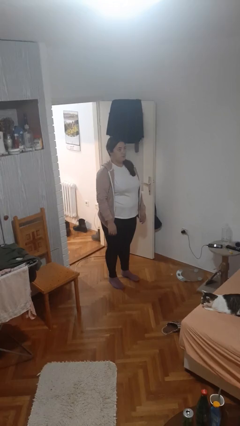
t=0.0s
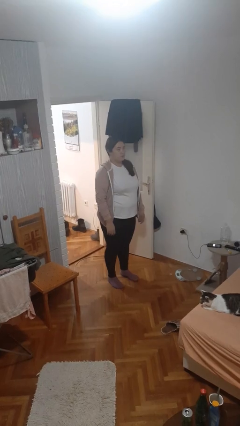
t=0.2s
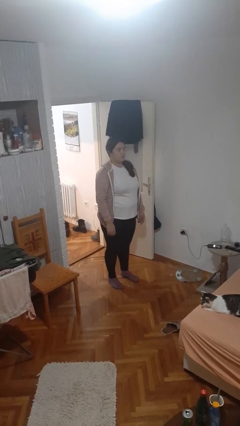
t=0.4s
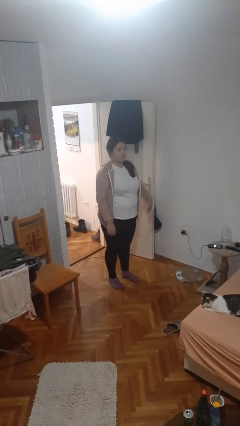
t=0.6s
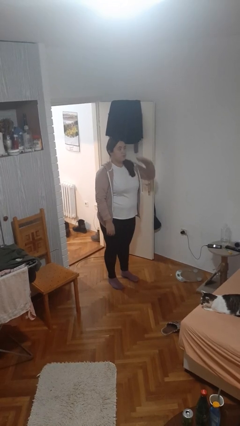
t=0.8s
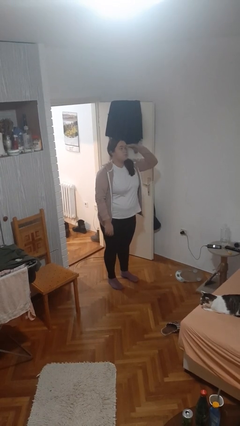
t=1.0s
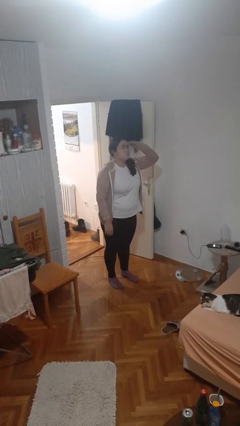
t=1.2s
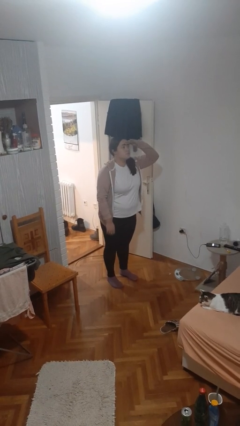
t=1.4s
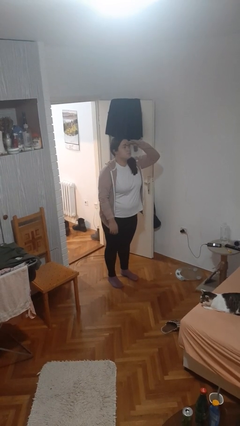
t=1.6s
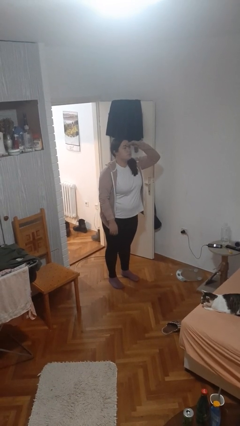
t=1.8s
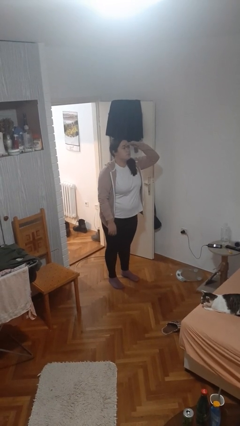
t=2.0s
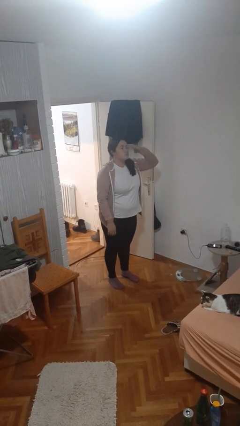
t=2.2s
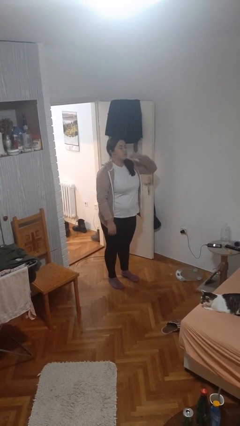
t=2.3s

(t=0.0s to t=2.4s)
person shades eyes

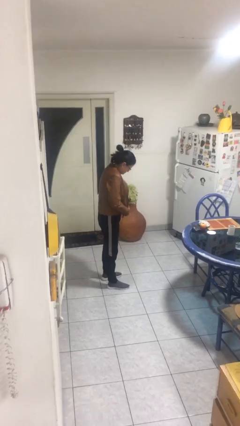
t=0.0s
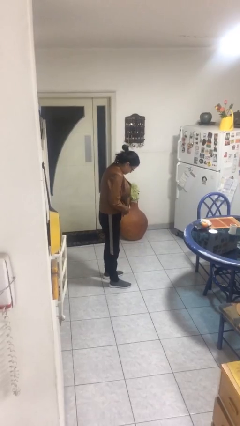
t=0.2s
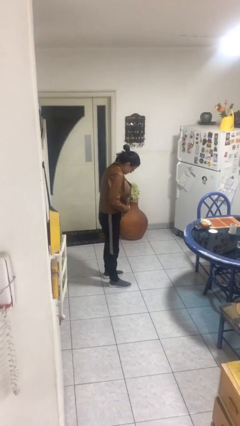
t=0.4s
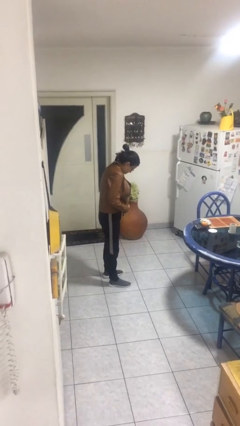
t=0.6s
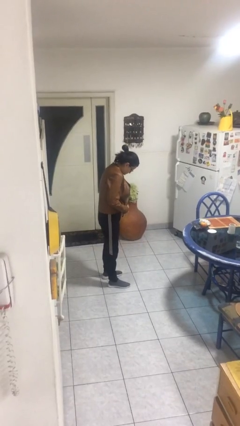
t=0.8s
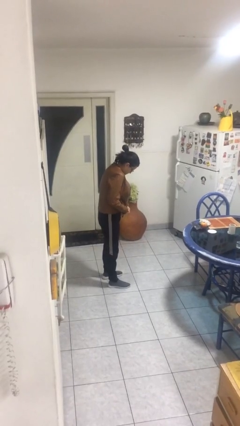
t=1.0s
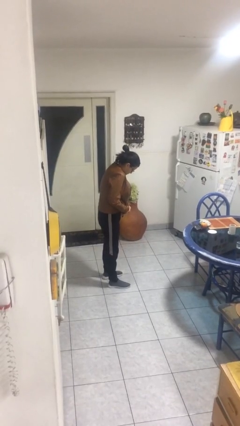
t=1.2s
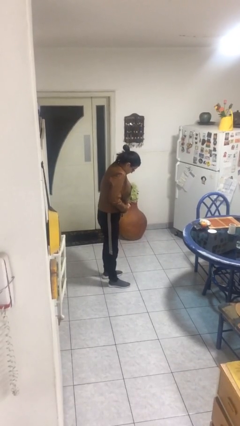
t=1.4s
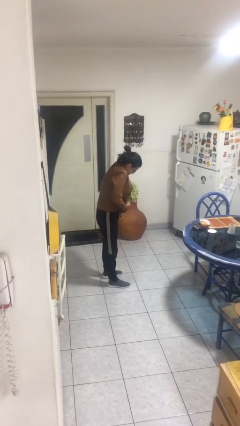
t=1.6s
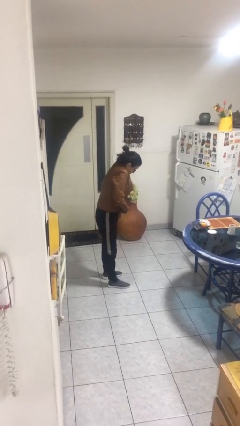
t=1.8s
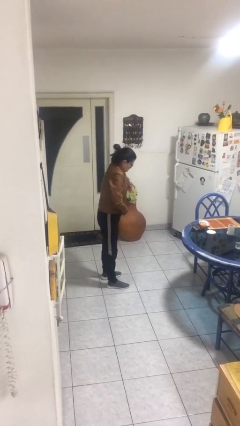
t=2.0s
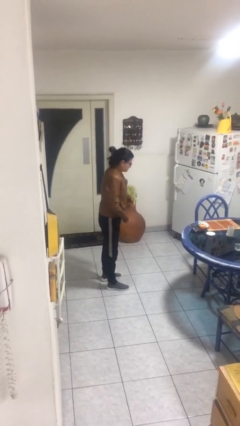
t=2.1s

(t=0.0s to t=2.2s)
person zips up jacket

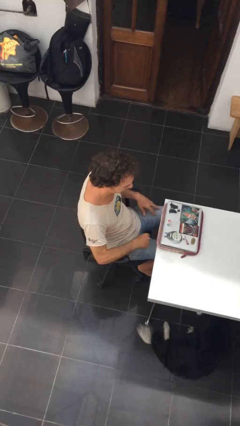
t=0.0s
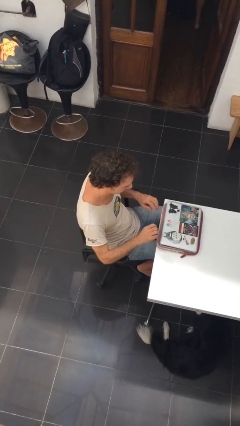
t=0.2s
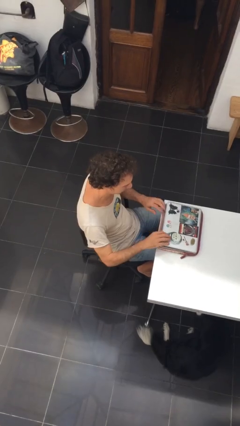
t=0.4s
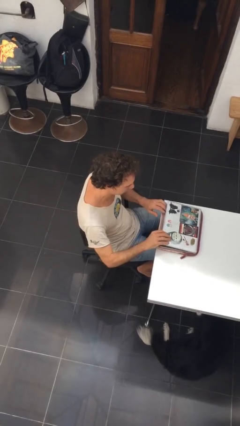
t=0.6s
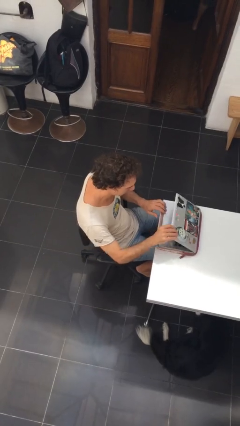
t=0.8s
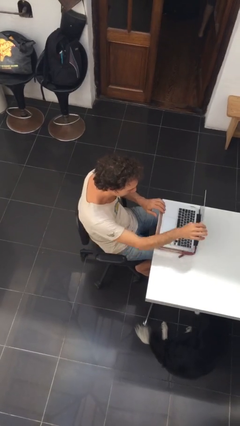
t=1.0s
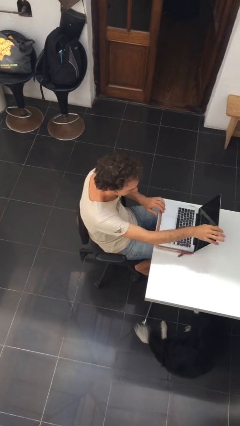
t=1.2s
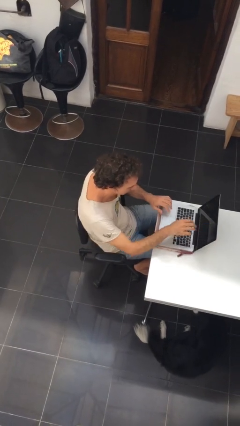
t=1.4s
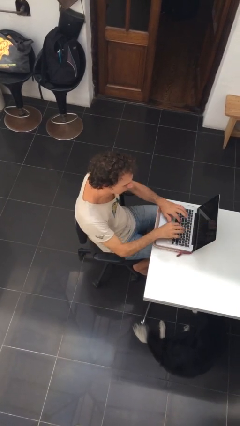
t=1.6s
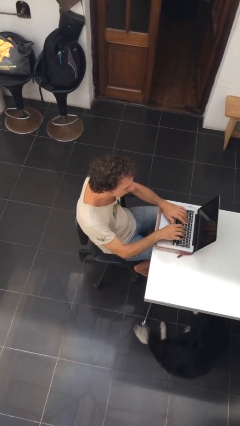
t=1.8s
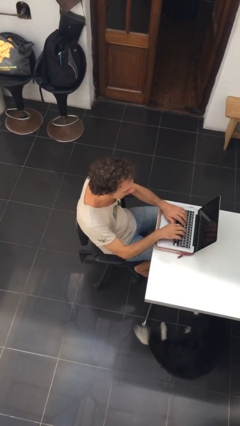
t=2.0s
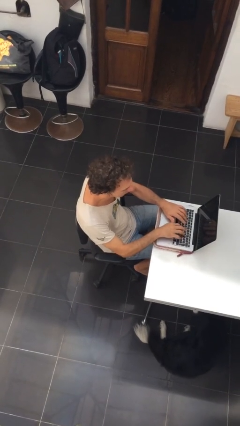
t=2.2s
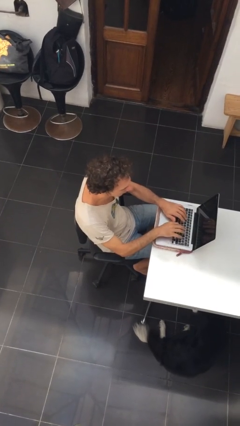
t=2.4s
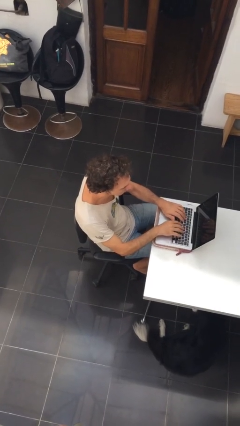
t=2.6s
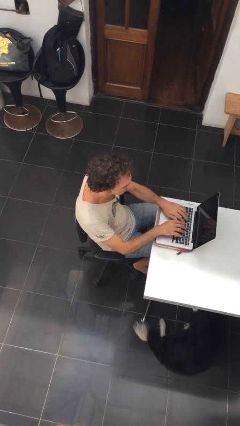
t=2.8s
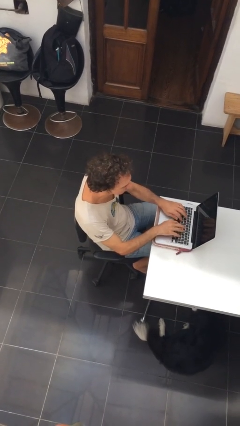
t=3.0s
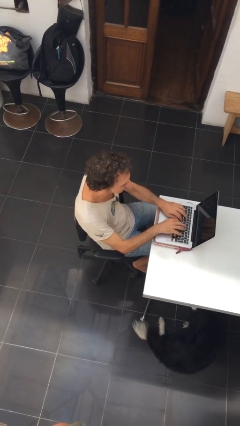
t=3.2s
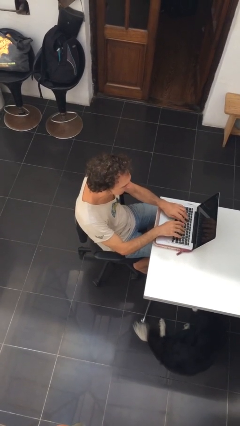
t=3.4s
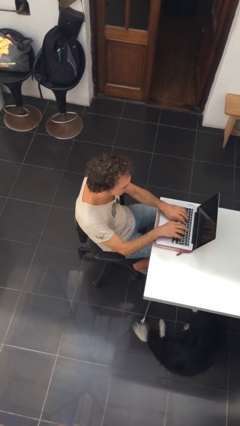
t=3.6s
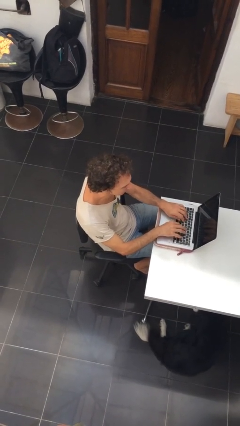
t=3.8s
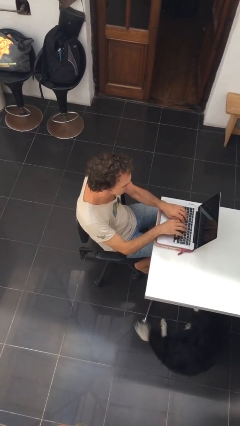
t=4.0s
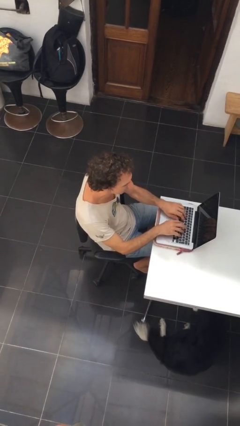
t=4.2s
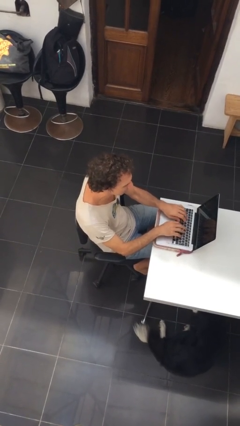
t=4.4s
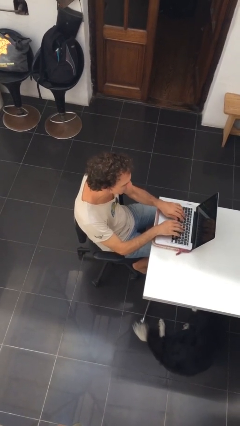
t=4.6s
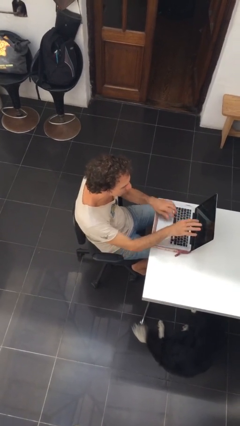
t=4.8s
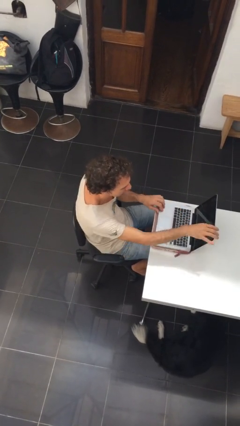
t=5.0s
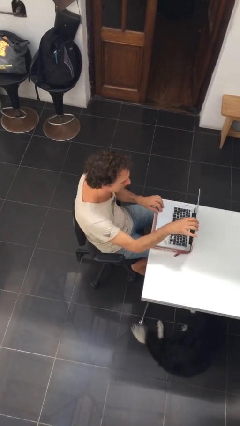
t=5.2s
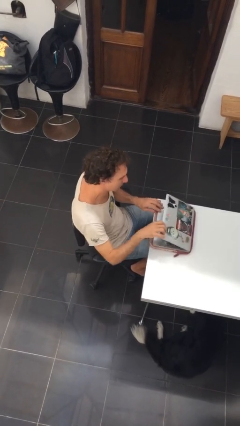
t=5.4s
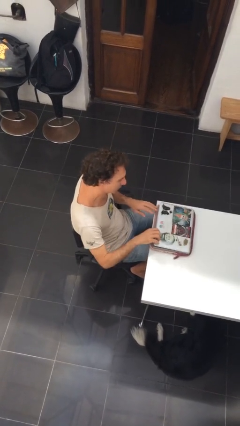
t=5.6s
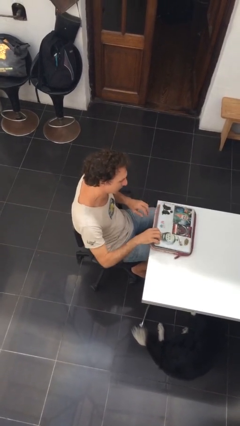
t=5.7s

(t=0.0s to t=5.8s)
person interacts with laptop

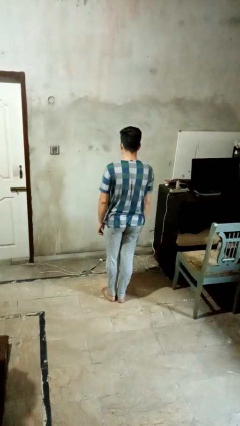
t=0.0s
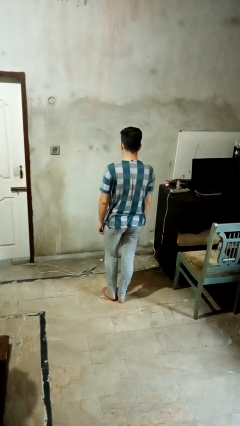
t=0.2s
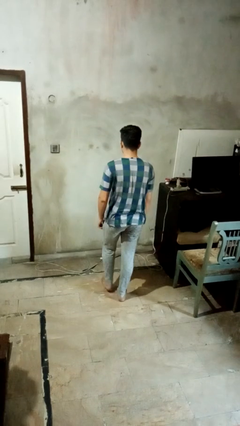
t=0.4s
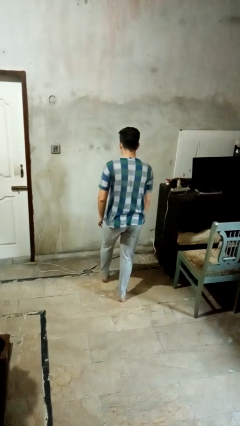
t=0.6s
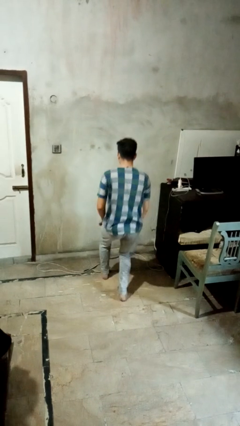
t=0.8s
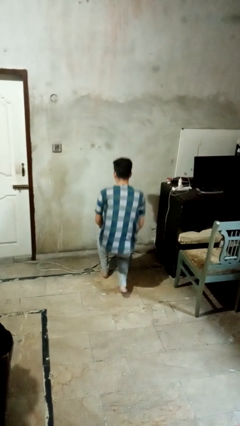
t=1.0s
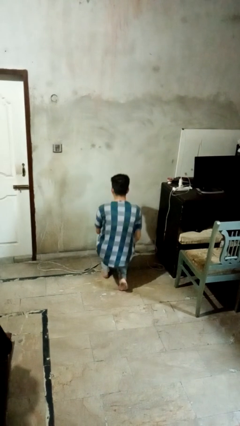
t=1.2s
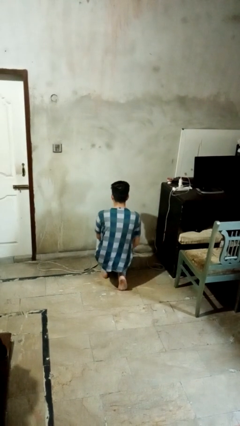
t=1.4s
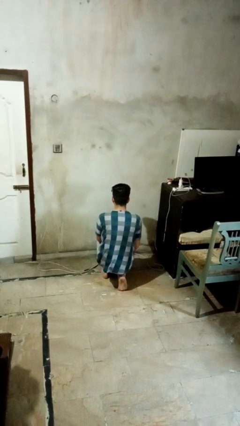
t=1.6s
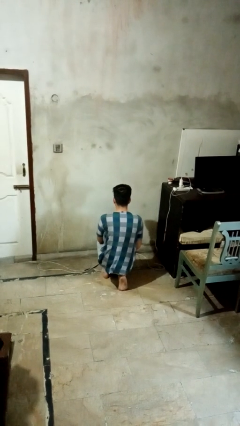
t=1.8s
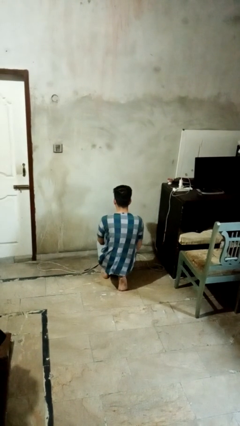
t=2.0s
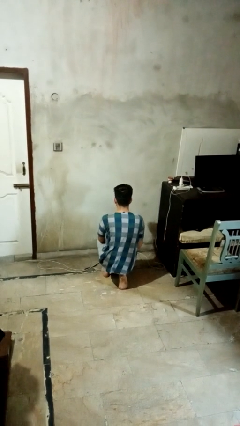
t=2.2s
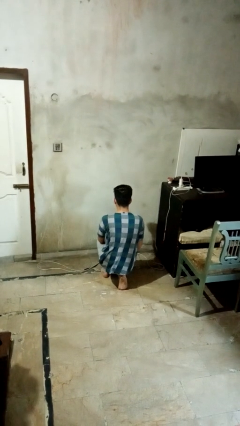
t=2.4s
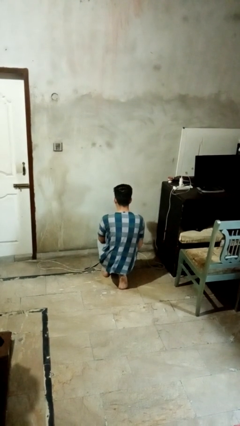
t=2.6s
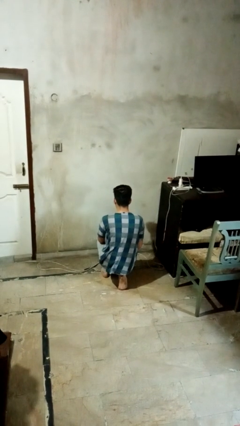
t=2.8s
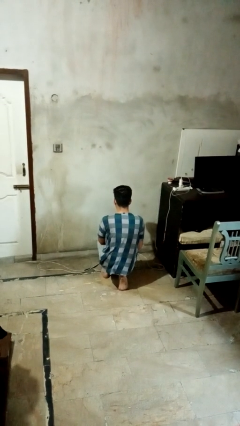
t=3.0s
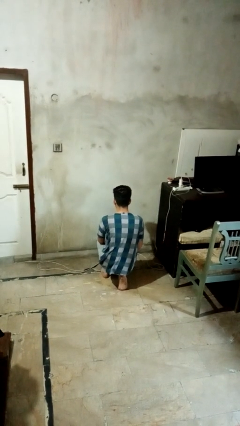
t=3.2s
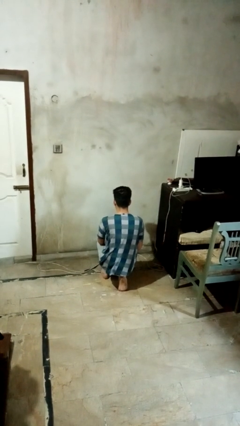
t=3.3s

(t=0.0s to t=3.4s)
person kneels

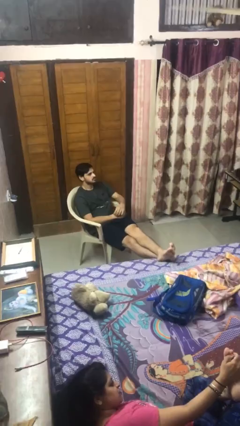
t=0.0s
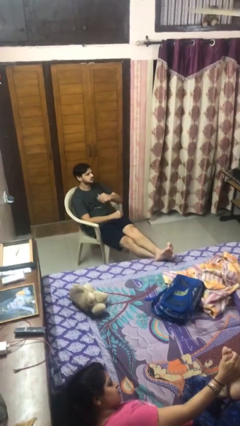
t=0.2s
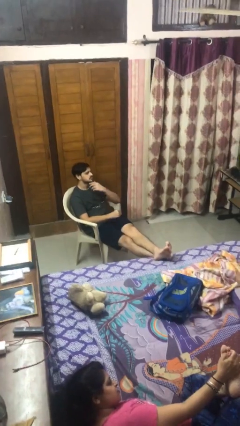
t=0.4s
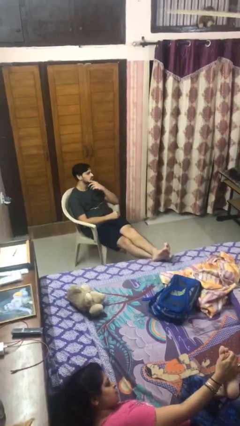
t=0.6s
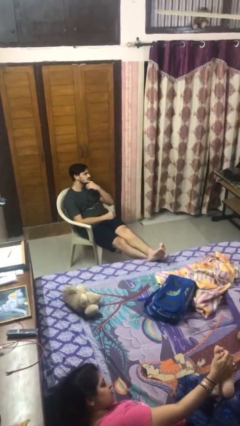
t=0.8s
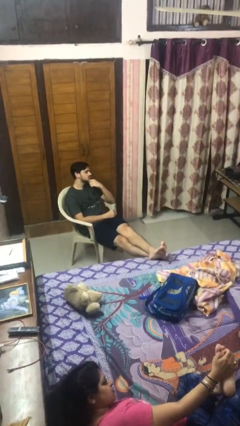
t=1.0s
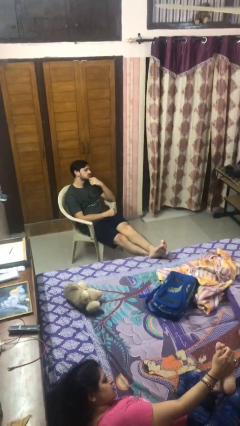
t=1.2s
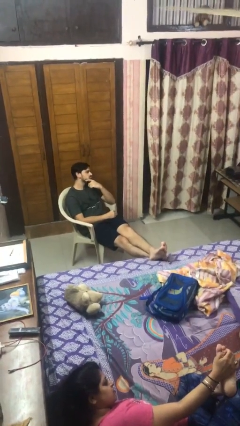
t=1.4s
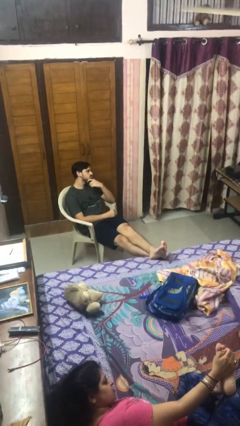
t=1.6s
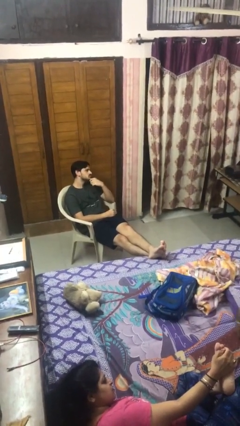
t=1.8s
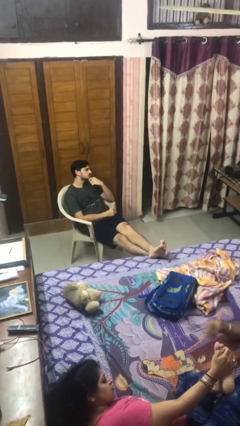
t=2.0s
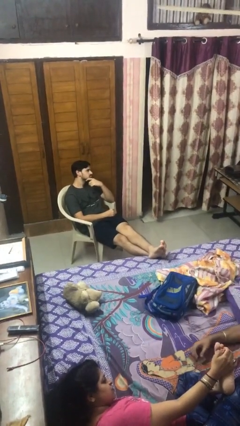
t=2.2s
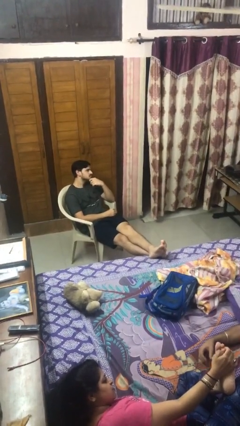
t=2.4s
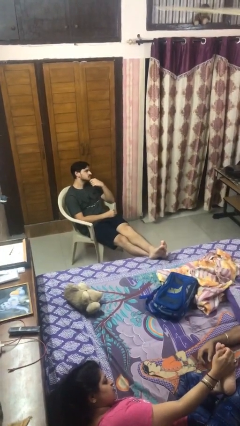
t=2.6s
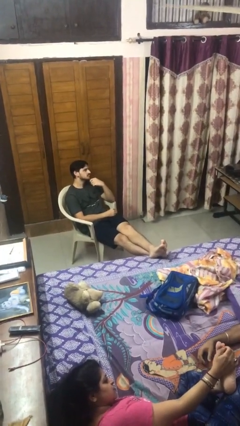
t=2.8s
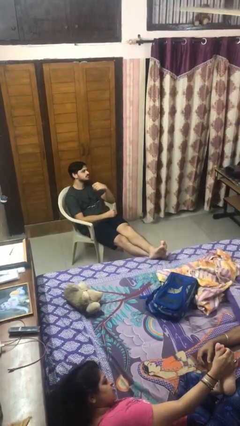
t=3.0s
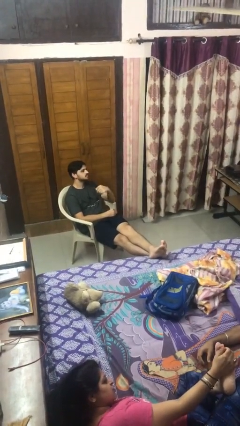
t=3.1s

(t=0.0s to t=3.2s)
person strokes chin

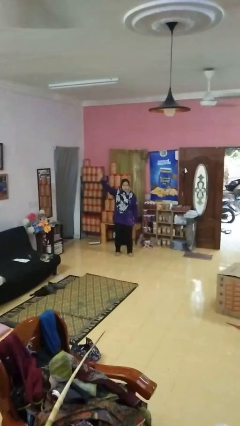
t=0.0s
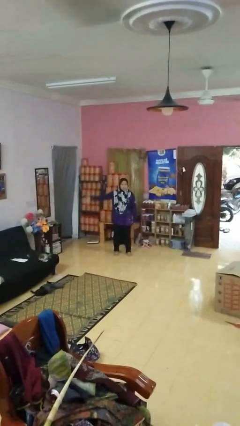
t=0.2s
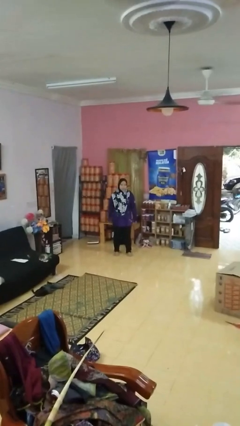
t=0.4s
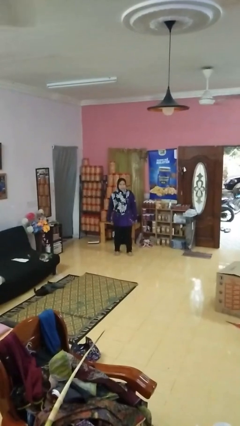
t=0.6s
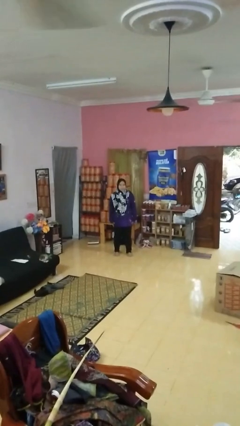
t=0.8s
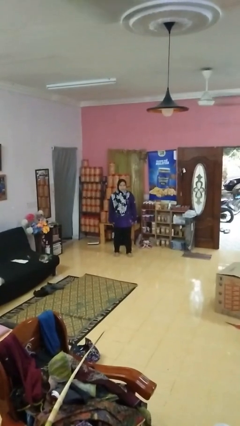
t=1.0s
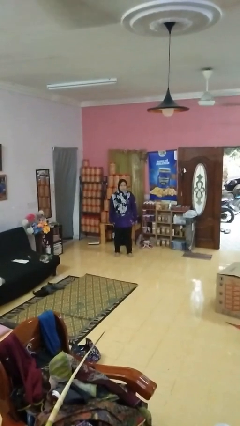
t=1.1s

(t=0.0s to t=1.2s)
person pats head
